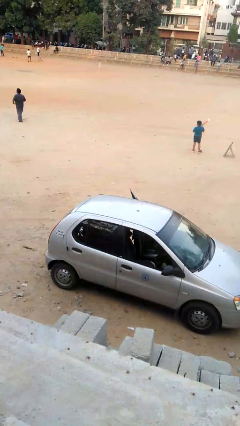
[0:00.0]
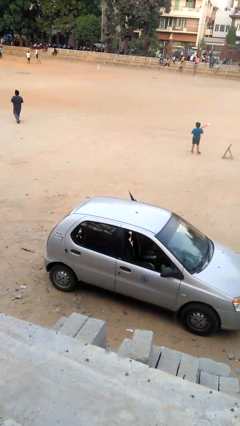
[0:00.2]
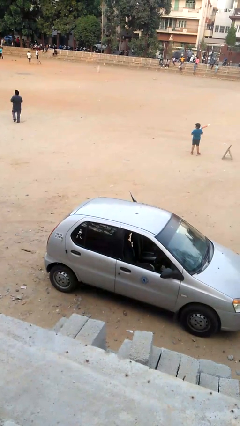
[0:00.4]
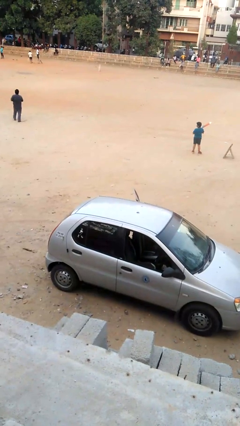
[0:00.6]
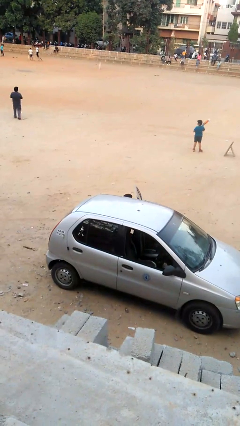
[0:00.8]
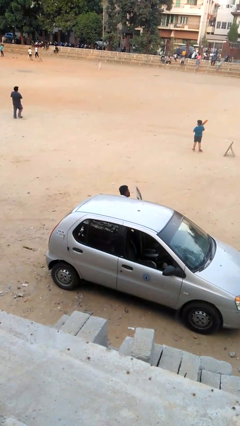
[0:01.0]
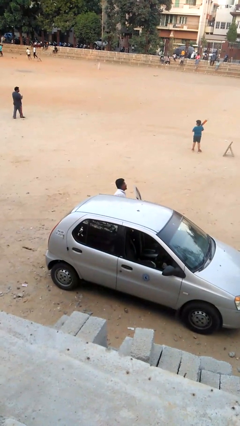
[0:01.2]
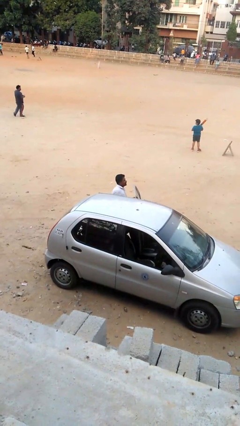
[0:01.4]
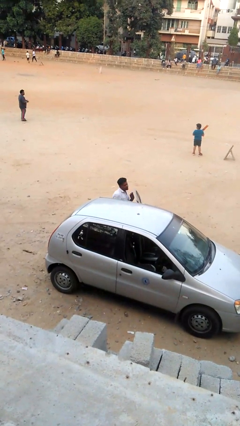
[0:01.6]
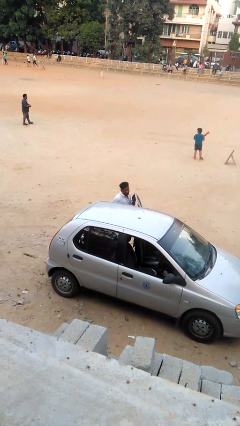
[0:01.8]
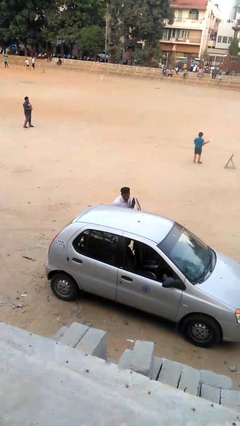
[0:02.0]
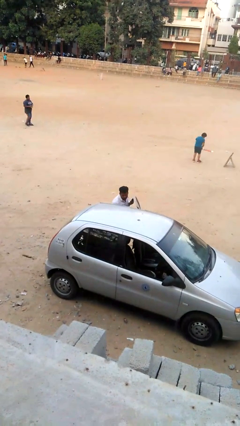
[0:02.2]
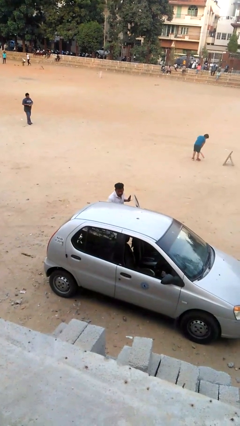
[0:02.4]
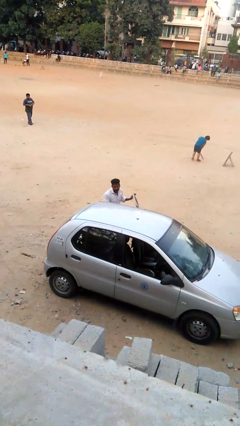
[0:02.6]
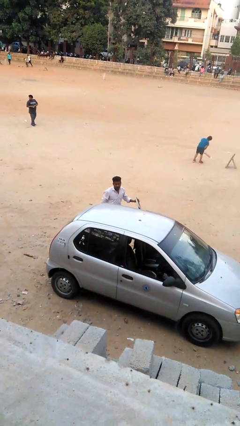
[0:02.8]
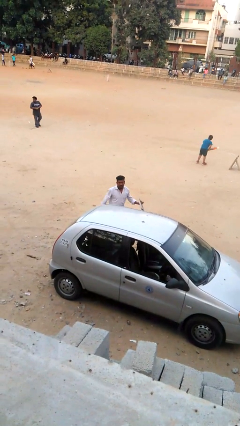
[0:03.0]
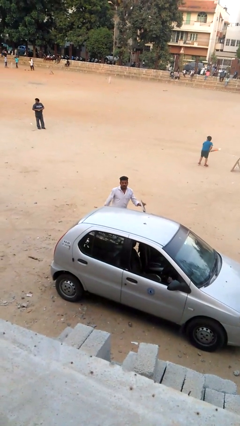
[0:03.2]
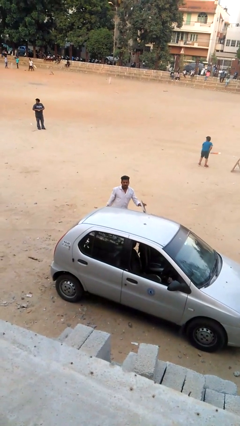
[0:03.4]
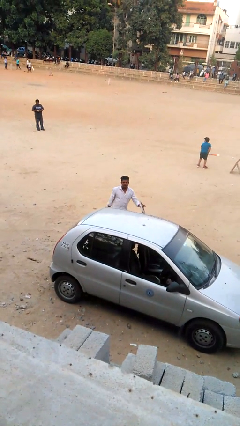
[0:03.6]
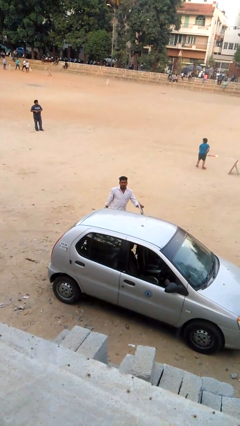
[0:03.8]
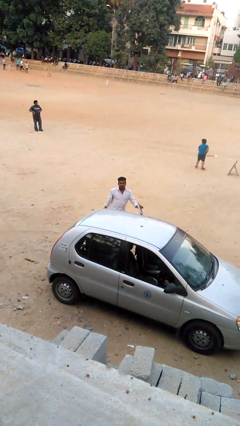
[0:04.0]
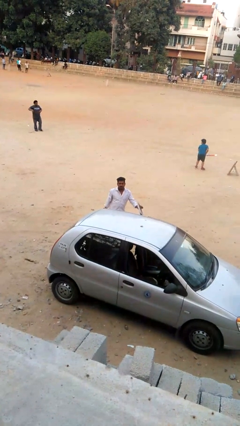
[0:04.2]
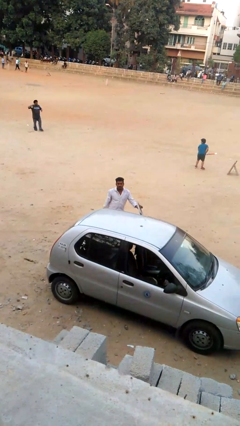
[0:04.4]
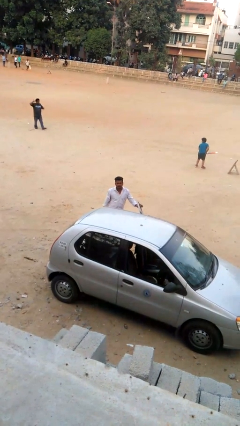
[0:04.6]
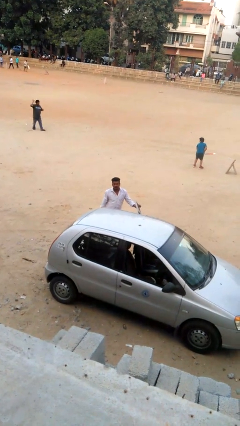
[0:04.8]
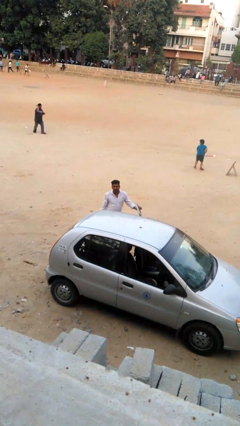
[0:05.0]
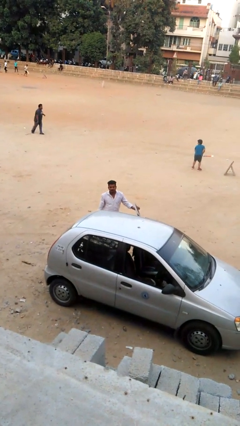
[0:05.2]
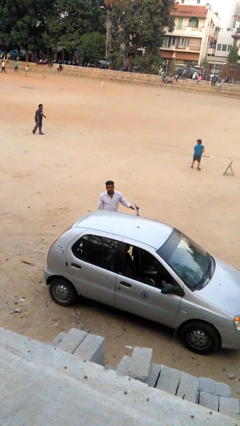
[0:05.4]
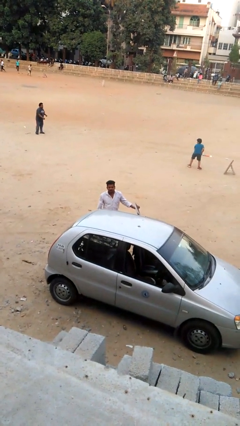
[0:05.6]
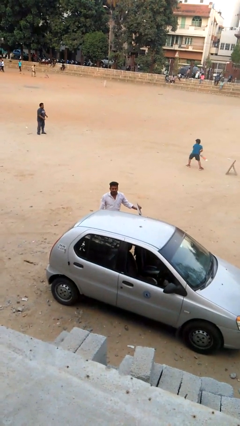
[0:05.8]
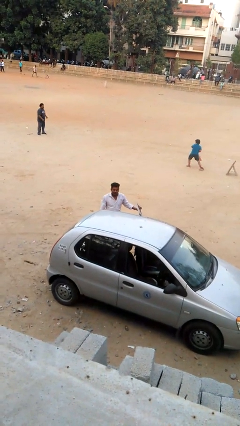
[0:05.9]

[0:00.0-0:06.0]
person exits car

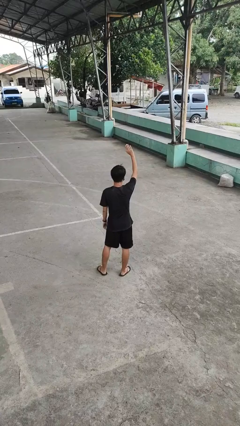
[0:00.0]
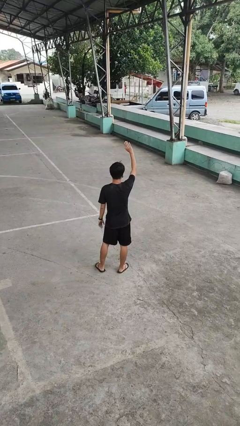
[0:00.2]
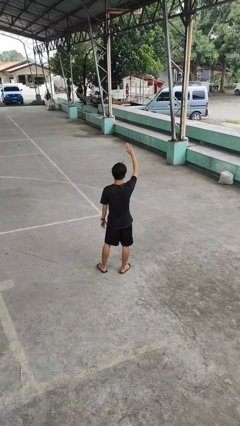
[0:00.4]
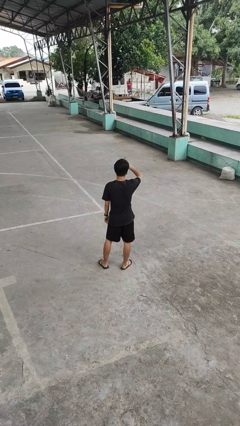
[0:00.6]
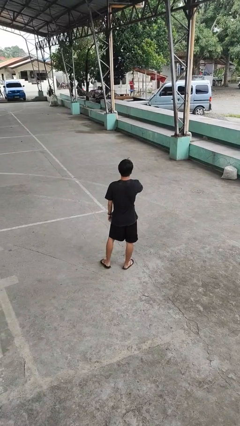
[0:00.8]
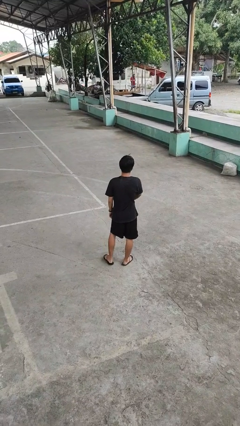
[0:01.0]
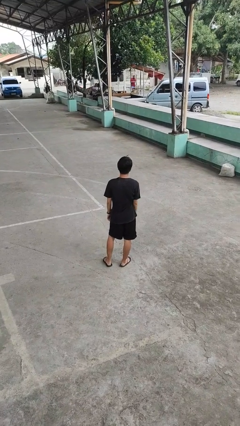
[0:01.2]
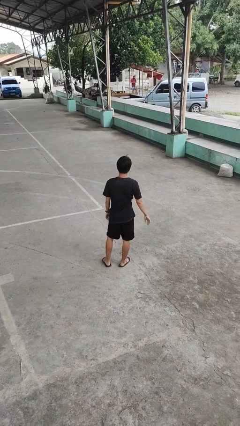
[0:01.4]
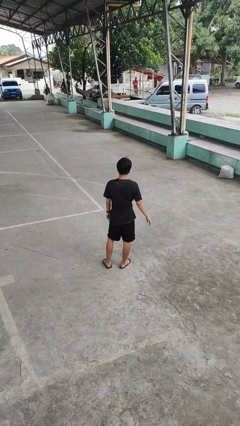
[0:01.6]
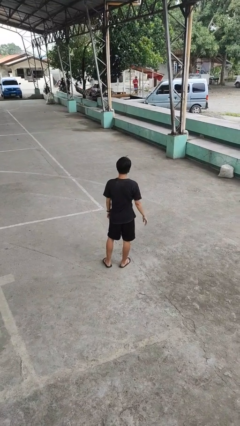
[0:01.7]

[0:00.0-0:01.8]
person gestures swipe down

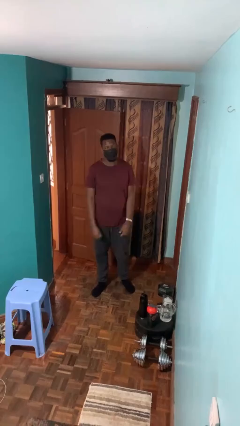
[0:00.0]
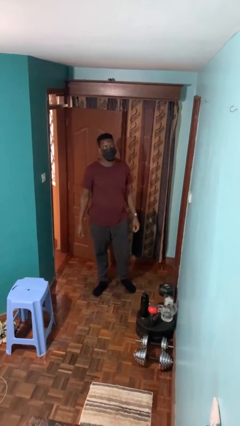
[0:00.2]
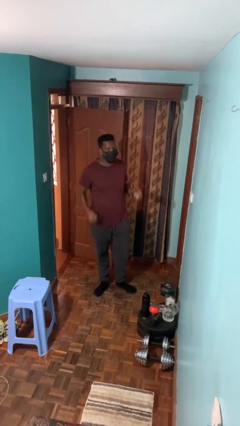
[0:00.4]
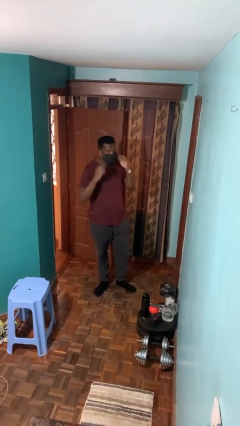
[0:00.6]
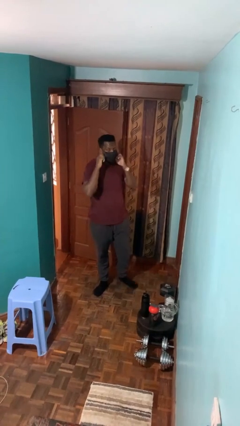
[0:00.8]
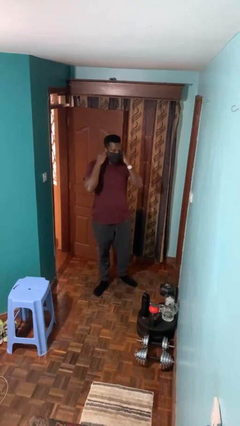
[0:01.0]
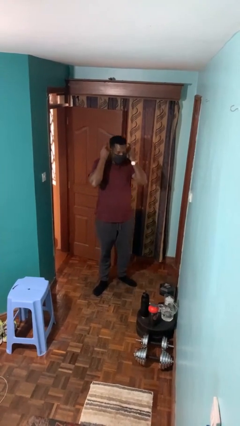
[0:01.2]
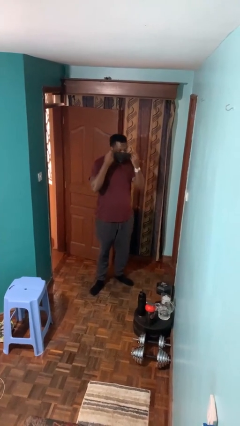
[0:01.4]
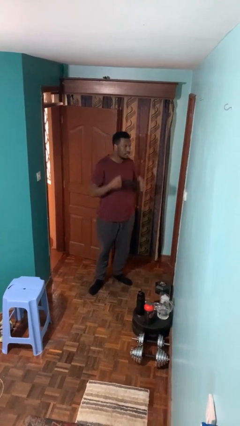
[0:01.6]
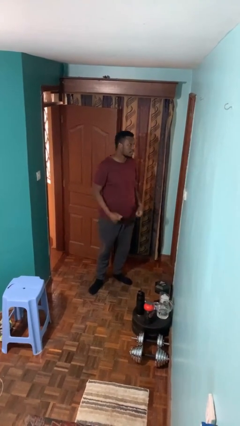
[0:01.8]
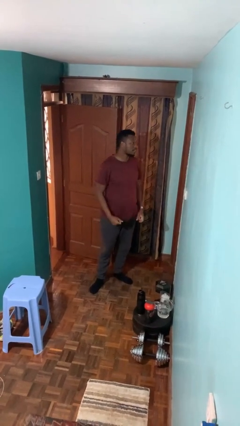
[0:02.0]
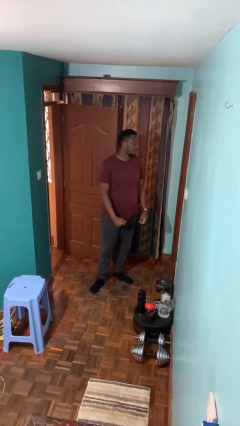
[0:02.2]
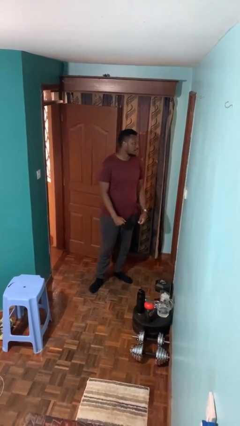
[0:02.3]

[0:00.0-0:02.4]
person takes off facemask

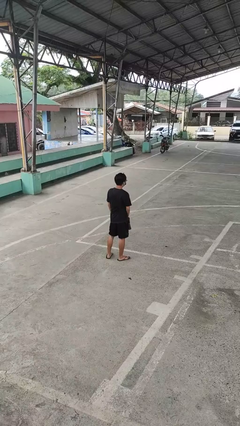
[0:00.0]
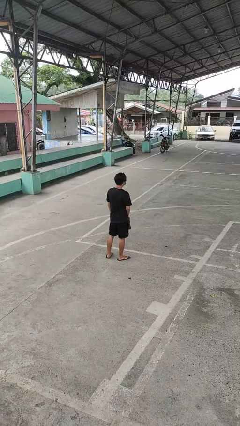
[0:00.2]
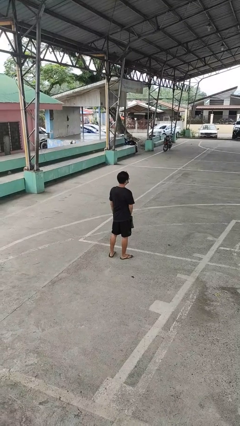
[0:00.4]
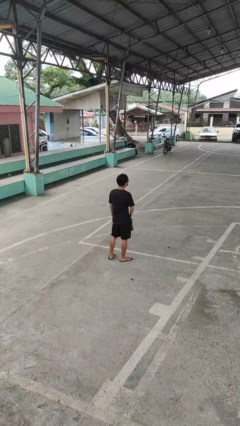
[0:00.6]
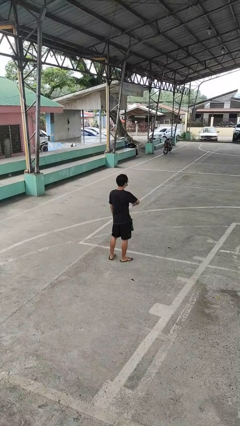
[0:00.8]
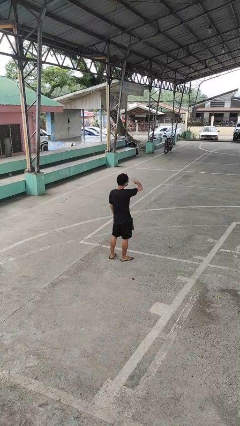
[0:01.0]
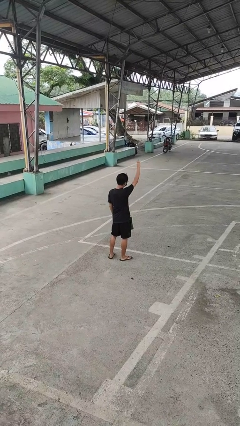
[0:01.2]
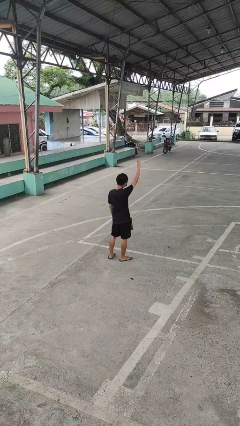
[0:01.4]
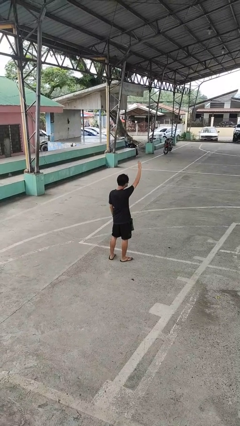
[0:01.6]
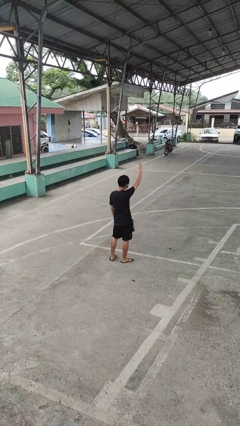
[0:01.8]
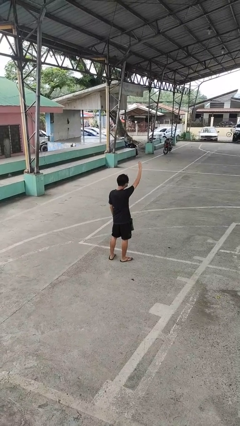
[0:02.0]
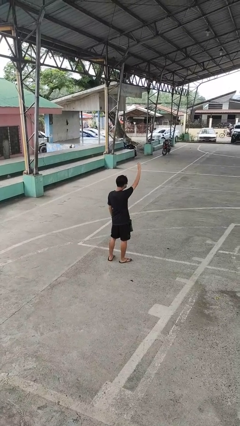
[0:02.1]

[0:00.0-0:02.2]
person gestures swipe up

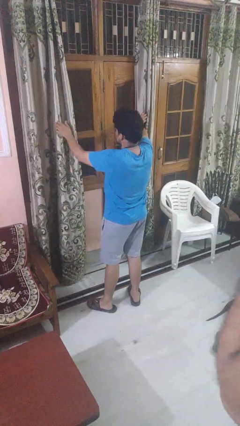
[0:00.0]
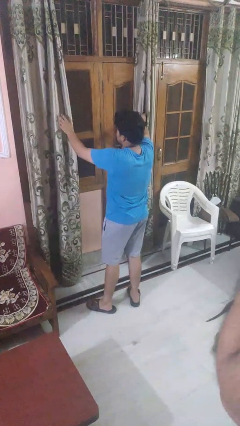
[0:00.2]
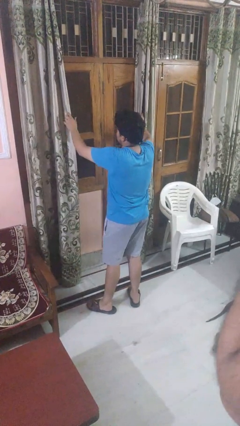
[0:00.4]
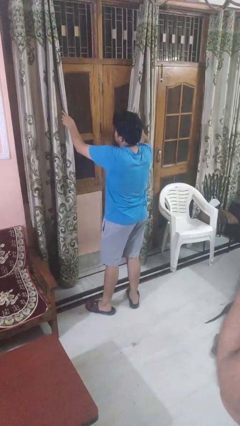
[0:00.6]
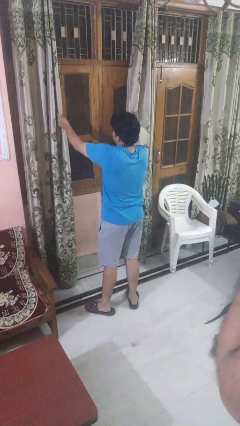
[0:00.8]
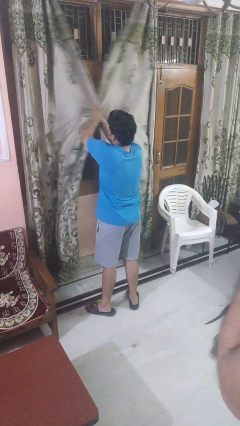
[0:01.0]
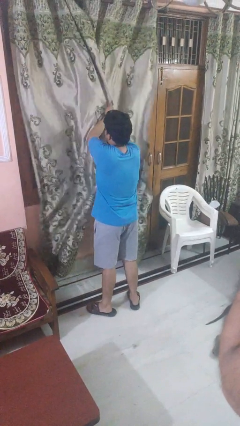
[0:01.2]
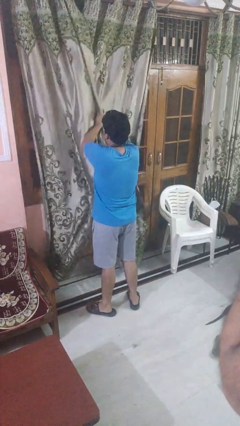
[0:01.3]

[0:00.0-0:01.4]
person closes curtains

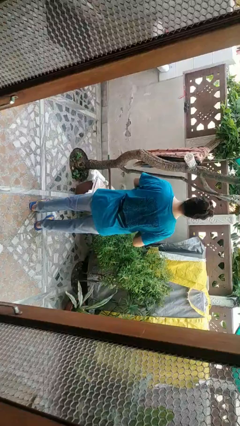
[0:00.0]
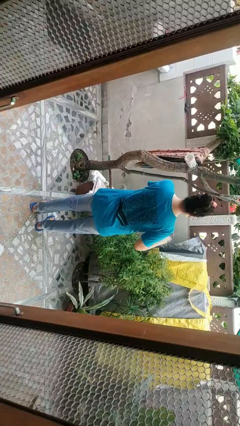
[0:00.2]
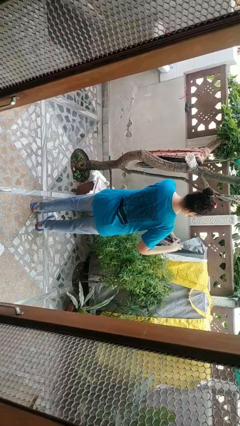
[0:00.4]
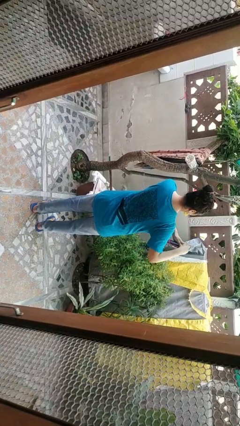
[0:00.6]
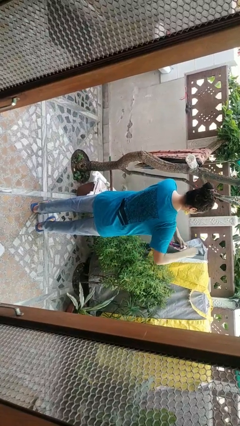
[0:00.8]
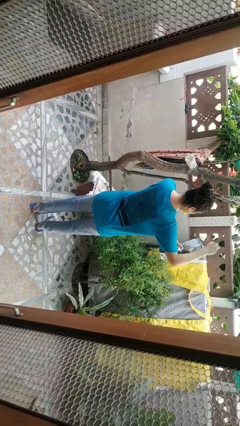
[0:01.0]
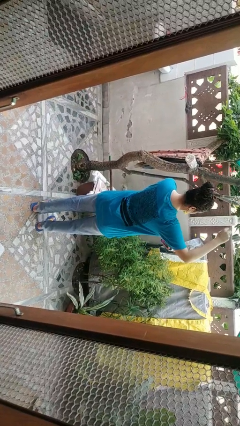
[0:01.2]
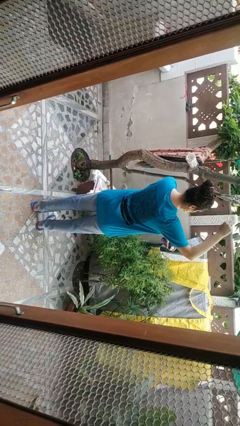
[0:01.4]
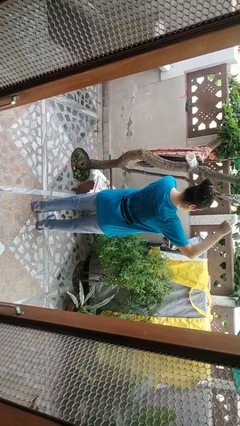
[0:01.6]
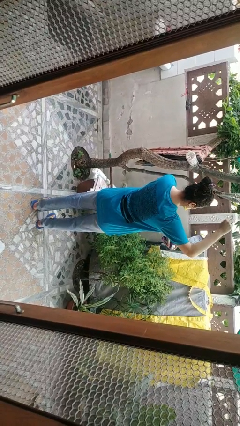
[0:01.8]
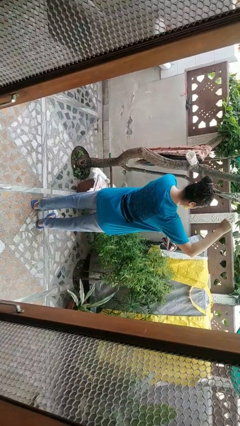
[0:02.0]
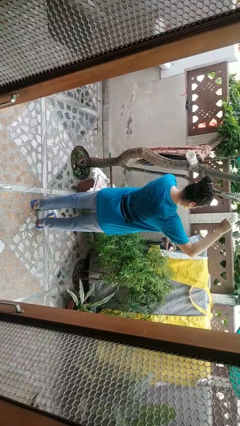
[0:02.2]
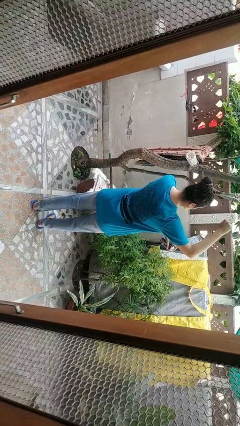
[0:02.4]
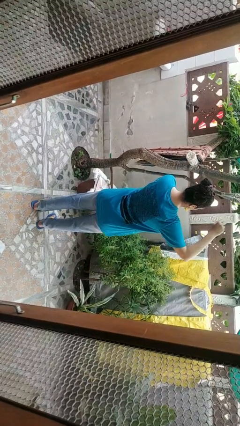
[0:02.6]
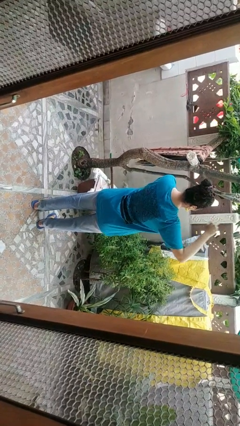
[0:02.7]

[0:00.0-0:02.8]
person applies deodorant

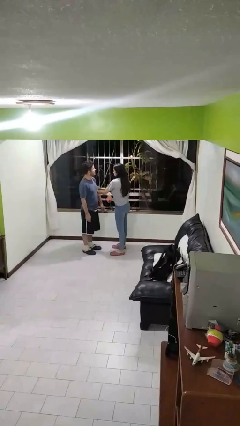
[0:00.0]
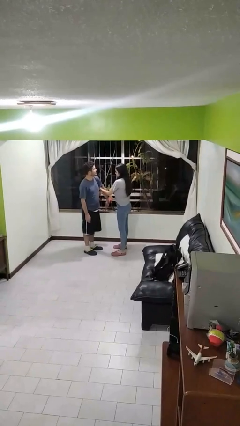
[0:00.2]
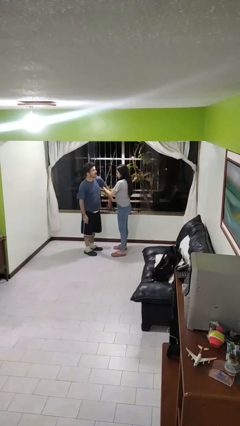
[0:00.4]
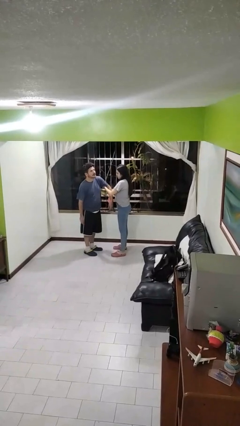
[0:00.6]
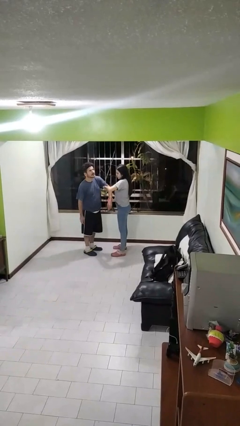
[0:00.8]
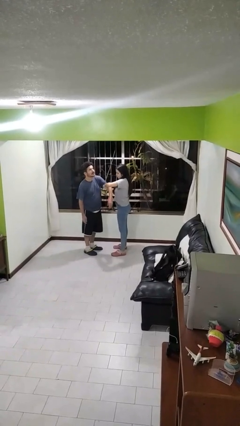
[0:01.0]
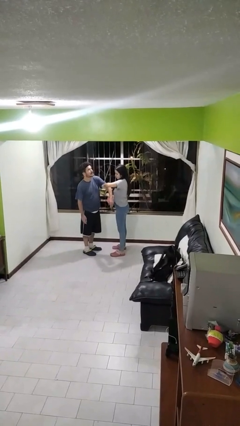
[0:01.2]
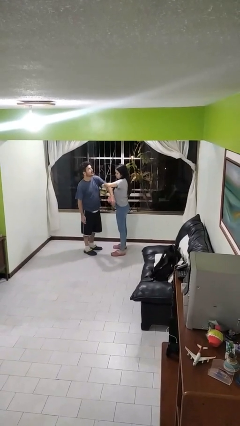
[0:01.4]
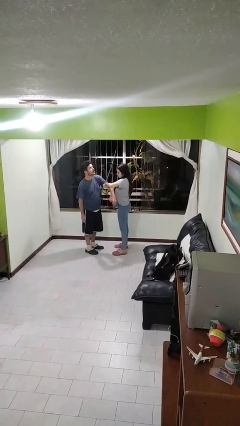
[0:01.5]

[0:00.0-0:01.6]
person grabs person by bicep
